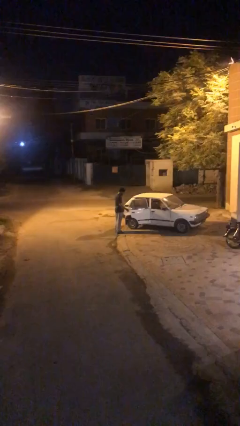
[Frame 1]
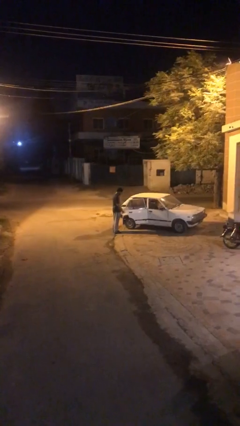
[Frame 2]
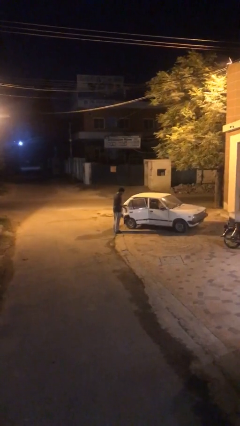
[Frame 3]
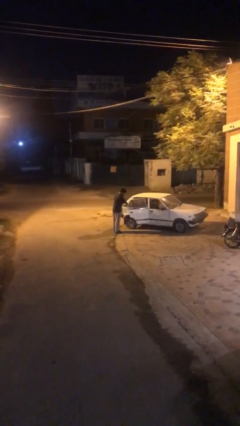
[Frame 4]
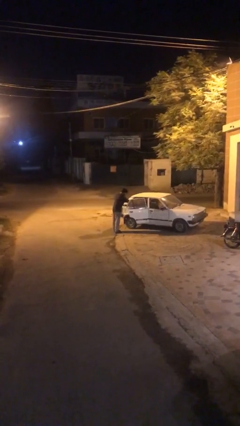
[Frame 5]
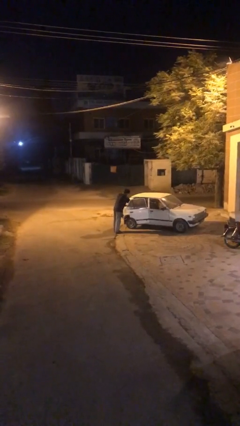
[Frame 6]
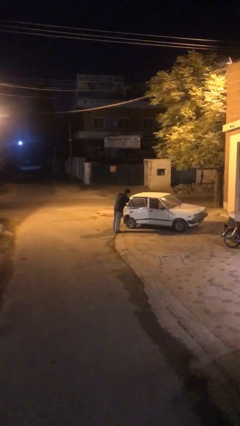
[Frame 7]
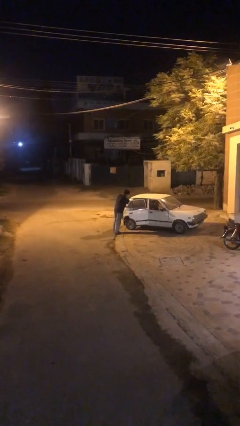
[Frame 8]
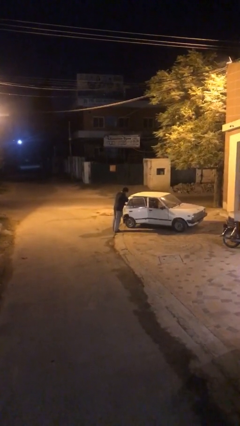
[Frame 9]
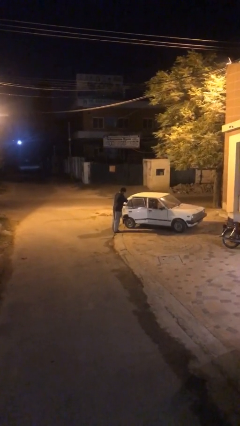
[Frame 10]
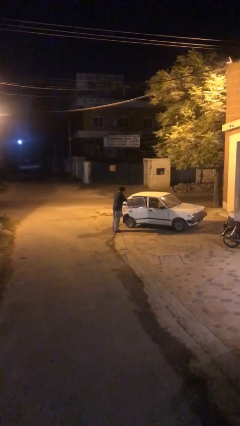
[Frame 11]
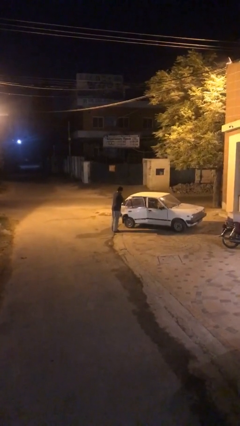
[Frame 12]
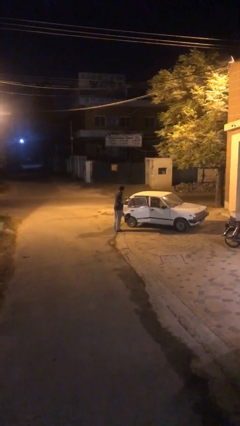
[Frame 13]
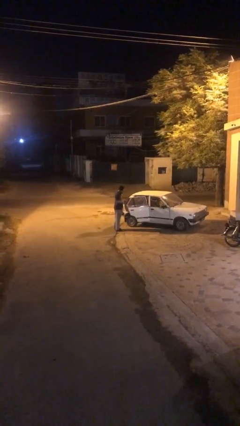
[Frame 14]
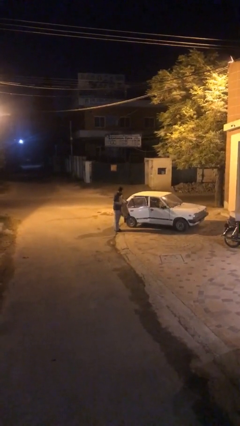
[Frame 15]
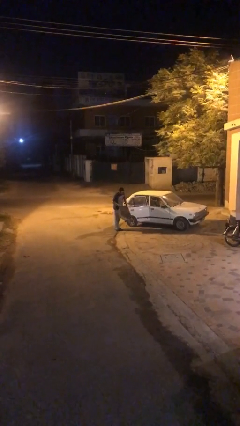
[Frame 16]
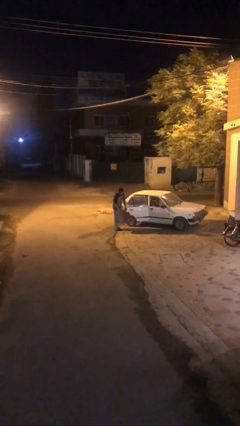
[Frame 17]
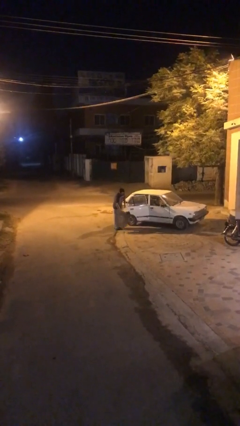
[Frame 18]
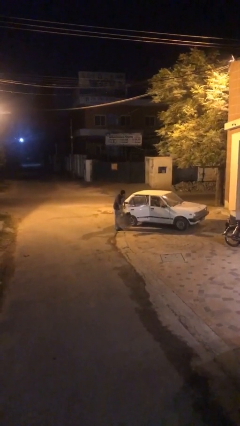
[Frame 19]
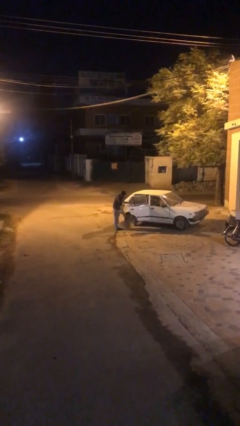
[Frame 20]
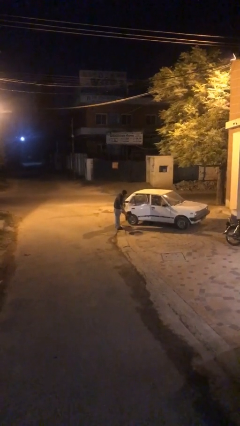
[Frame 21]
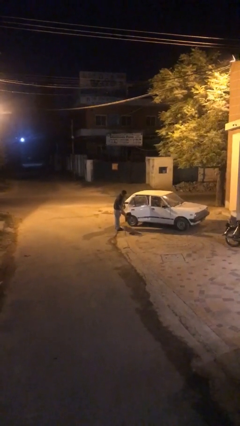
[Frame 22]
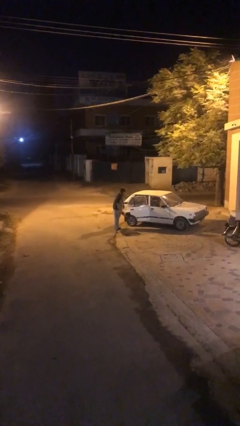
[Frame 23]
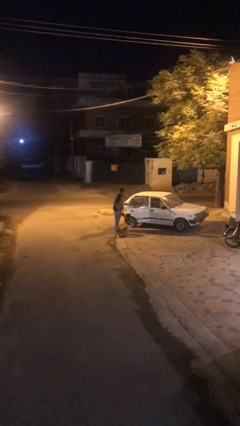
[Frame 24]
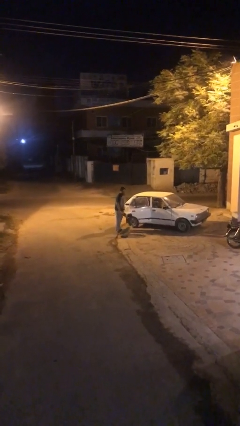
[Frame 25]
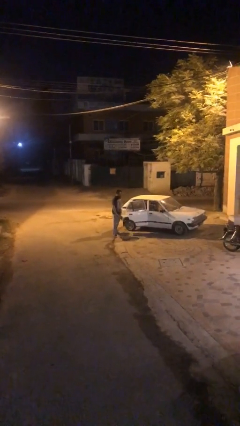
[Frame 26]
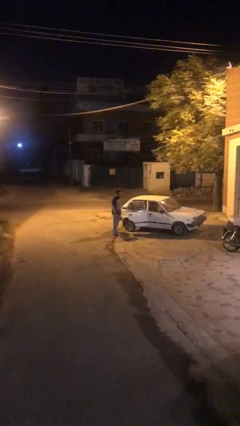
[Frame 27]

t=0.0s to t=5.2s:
person unloads car

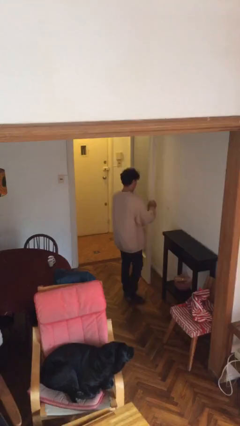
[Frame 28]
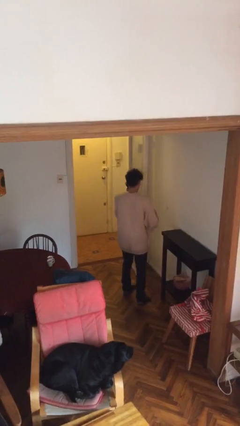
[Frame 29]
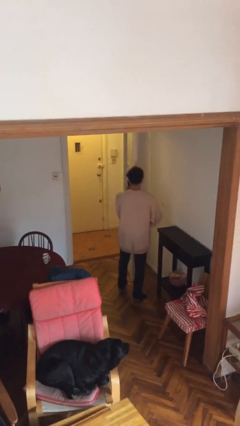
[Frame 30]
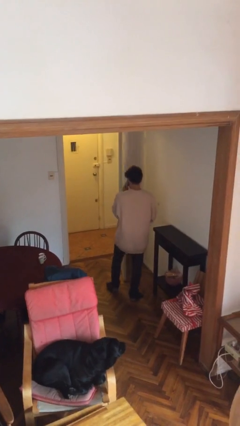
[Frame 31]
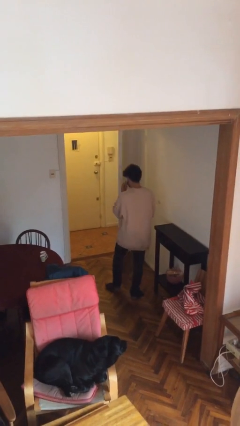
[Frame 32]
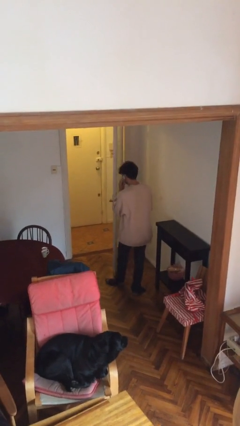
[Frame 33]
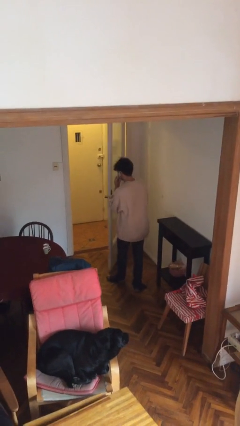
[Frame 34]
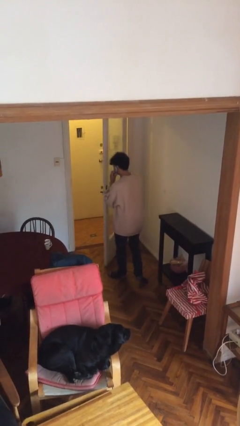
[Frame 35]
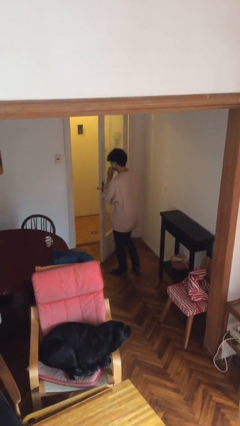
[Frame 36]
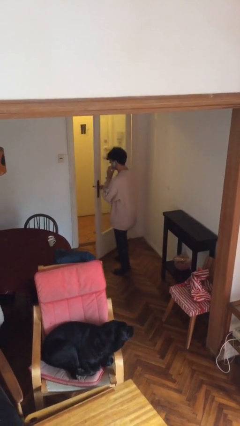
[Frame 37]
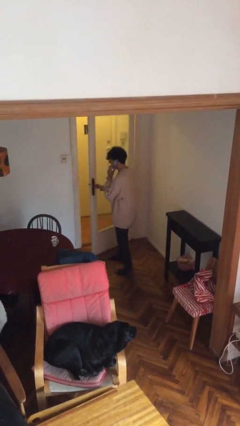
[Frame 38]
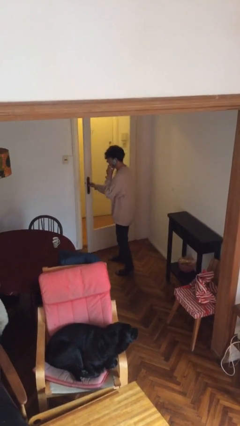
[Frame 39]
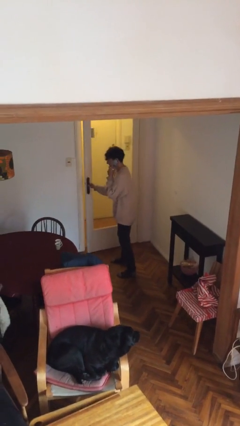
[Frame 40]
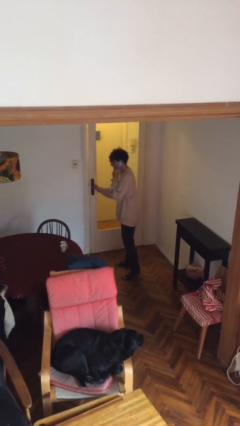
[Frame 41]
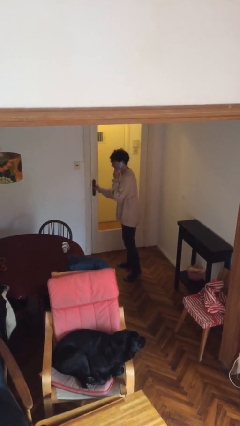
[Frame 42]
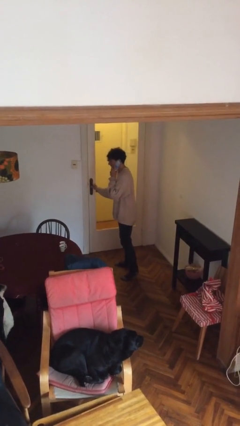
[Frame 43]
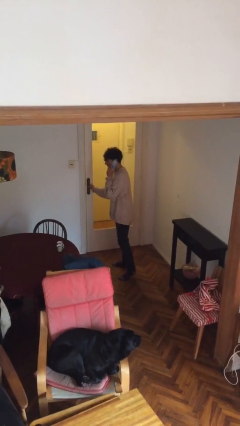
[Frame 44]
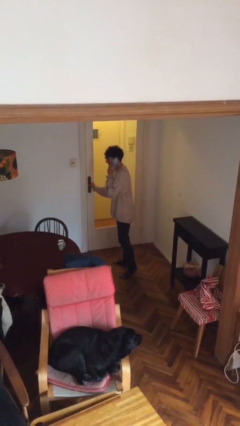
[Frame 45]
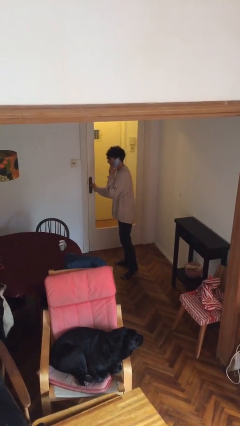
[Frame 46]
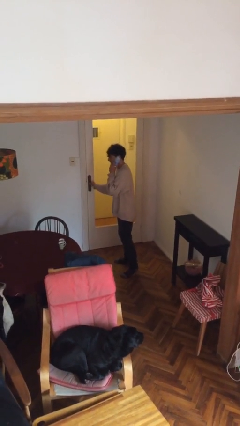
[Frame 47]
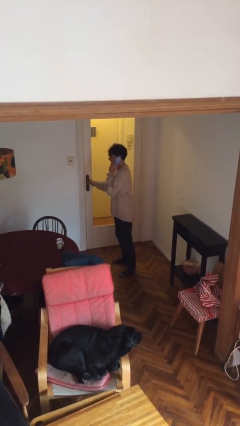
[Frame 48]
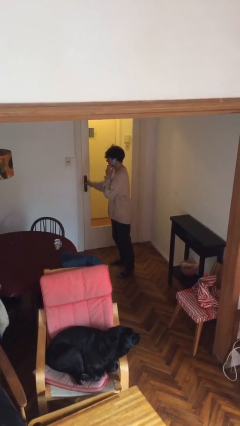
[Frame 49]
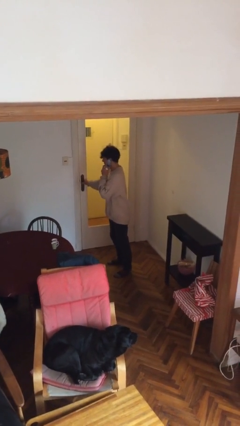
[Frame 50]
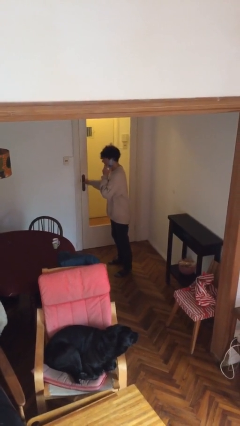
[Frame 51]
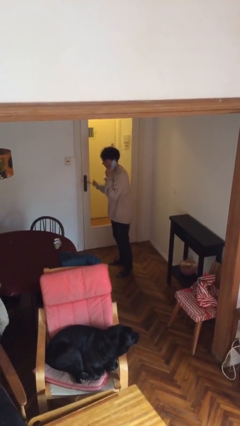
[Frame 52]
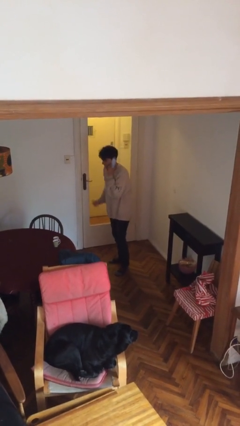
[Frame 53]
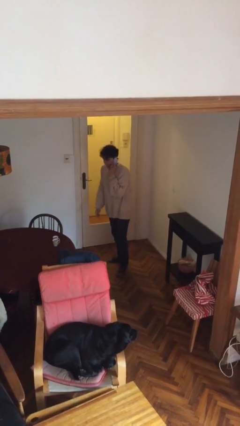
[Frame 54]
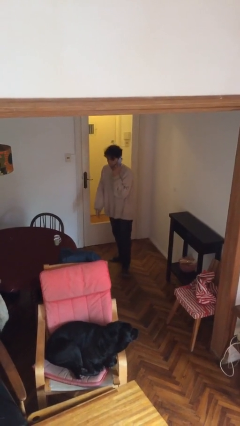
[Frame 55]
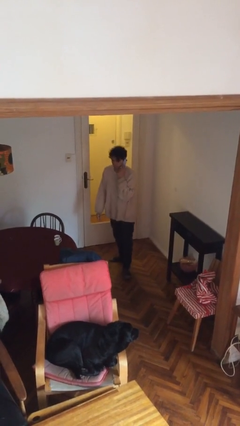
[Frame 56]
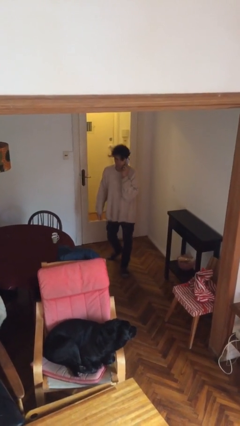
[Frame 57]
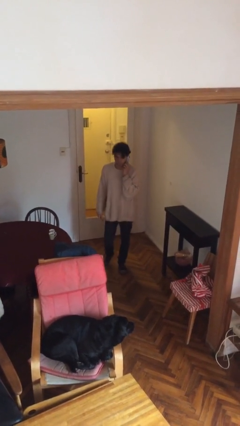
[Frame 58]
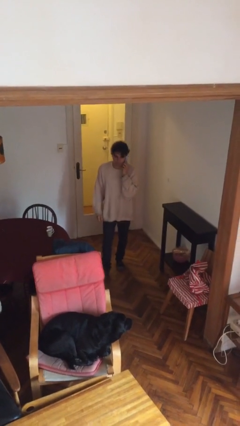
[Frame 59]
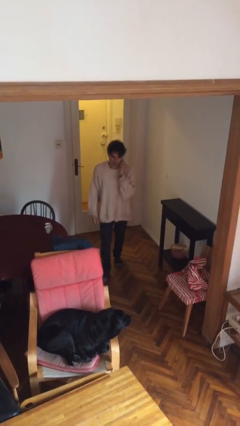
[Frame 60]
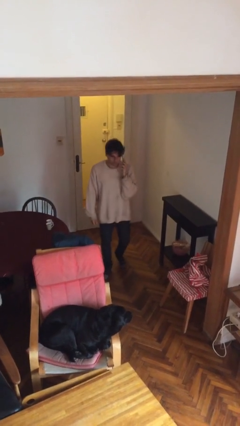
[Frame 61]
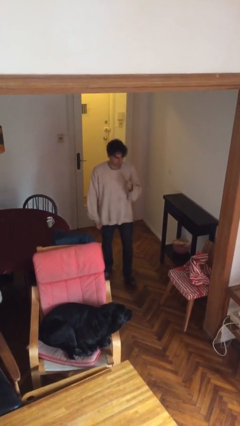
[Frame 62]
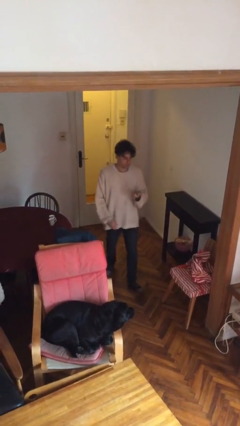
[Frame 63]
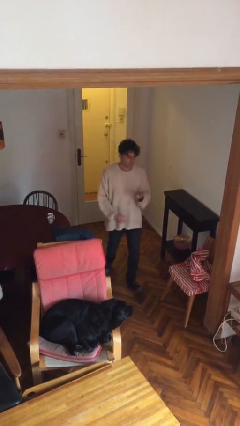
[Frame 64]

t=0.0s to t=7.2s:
person closes facility door

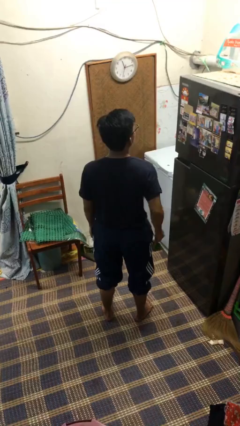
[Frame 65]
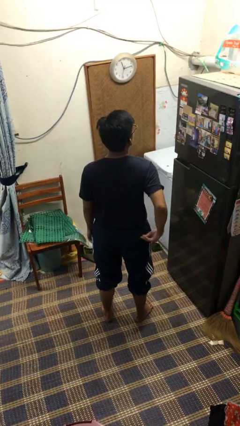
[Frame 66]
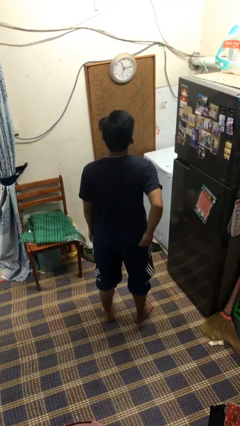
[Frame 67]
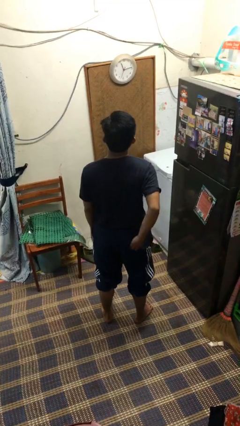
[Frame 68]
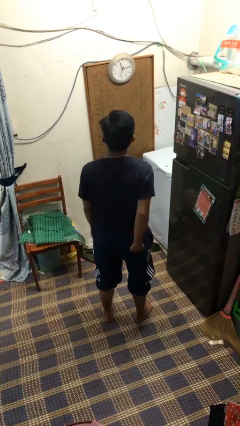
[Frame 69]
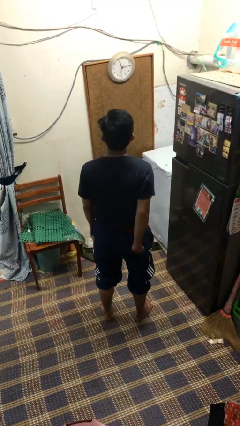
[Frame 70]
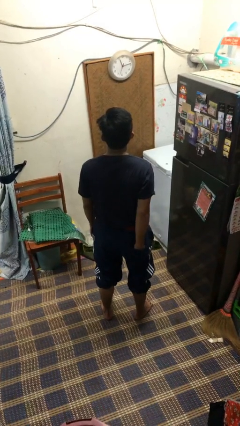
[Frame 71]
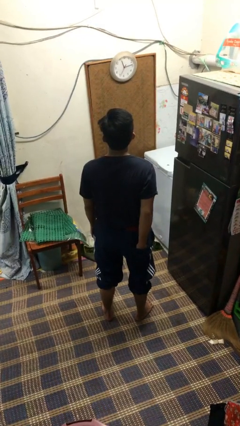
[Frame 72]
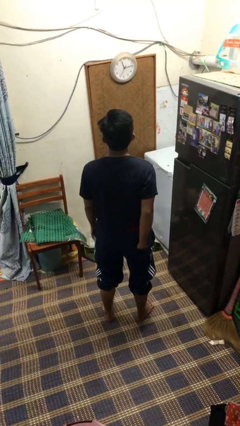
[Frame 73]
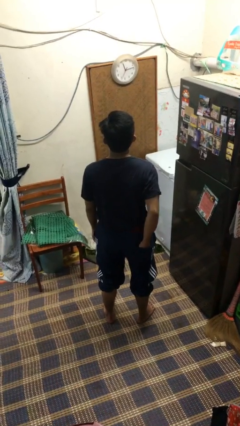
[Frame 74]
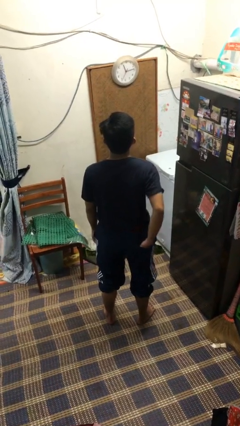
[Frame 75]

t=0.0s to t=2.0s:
person puts hands in back pockets

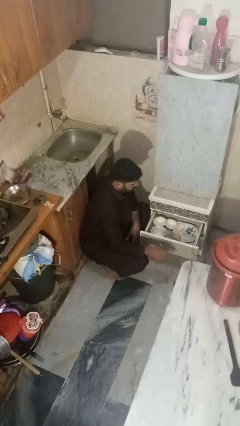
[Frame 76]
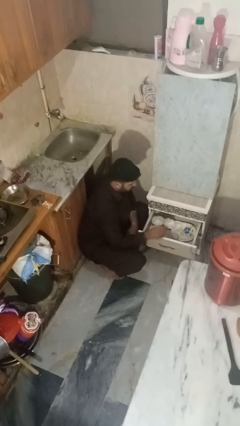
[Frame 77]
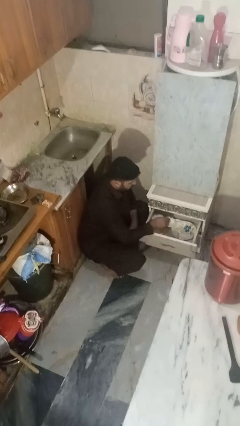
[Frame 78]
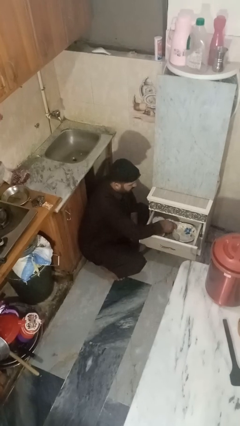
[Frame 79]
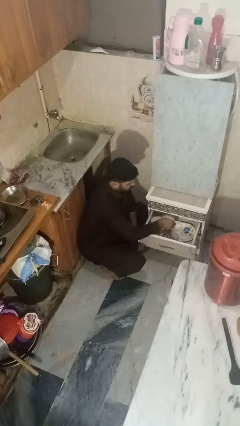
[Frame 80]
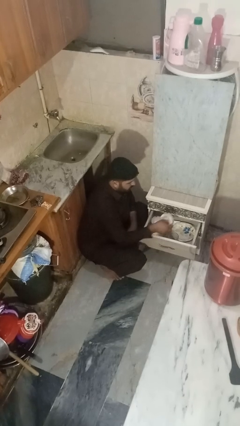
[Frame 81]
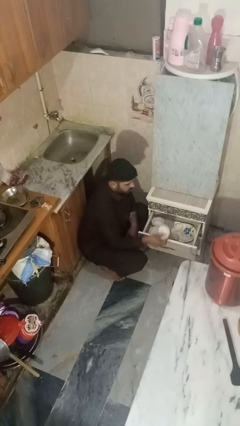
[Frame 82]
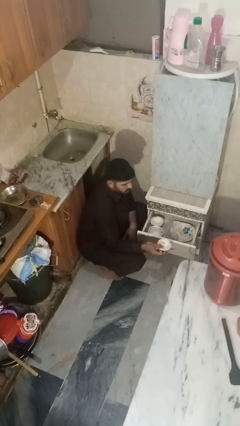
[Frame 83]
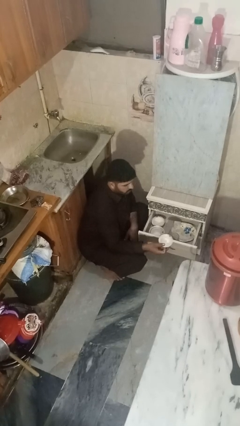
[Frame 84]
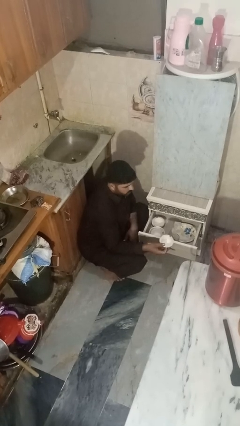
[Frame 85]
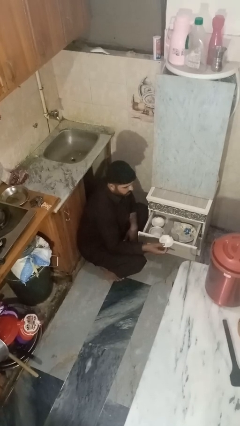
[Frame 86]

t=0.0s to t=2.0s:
person takes object from kitchen drawer

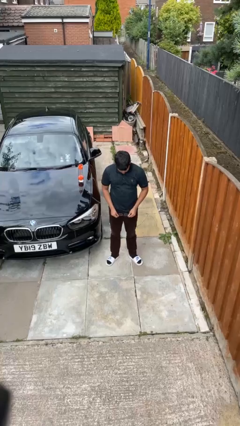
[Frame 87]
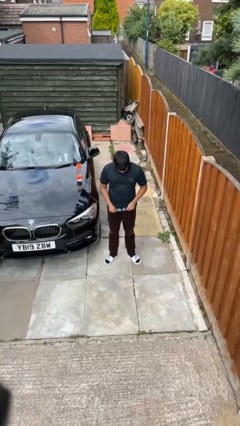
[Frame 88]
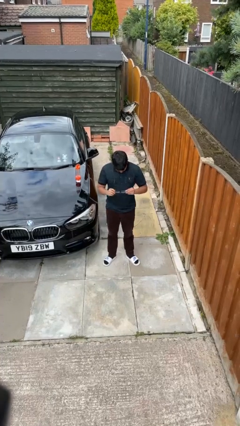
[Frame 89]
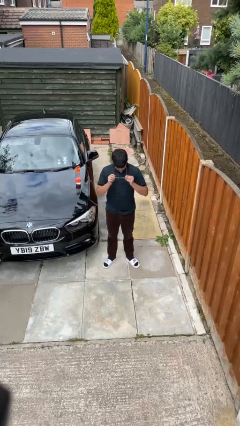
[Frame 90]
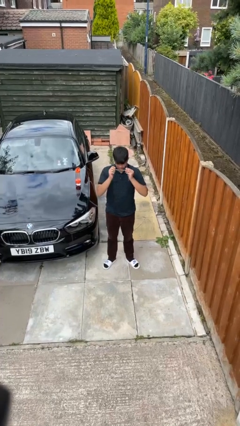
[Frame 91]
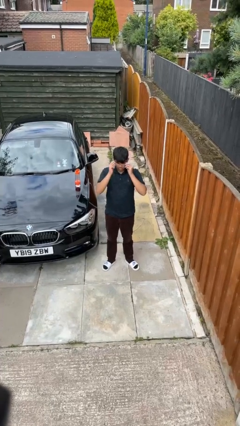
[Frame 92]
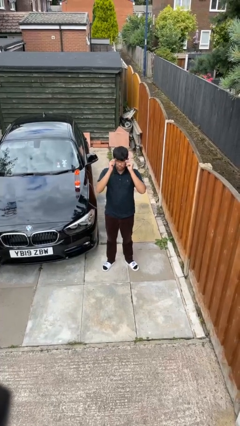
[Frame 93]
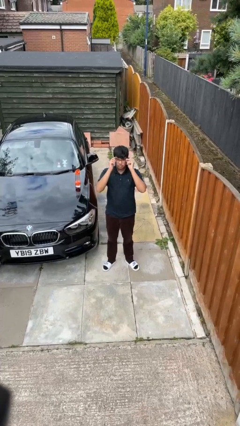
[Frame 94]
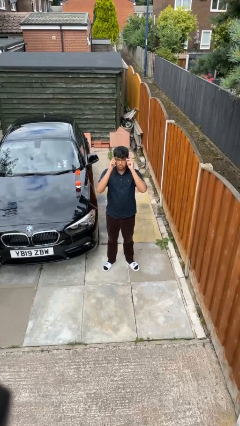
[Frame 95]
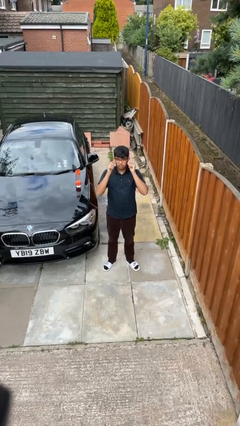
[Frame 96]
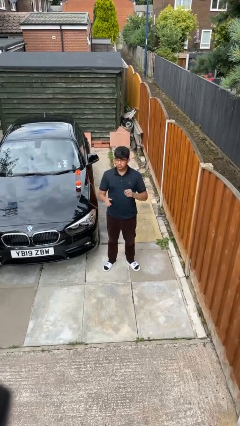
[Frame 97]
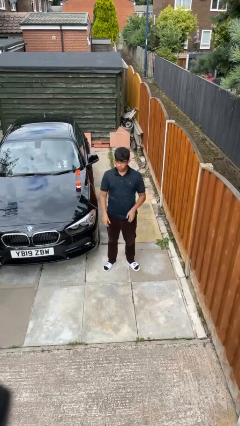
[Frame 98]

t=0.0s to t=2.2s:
person puts on glasses
